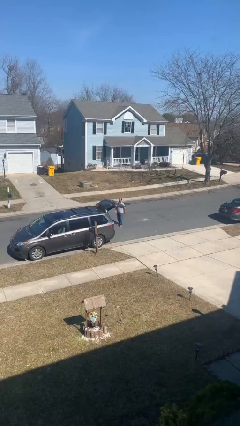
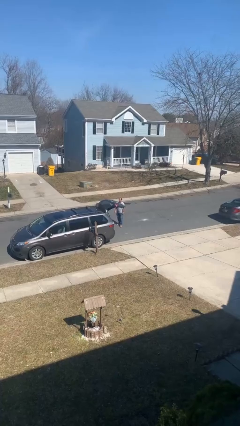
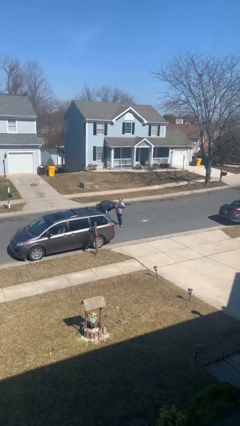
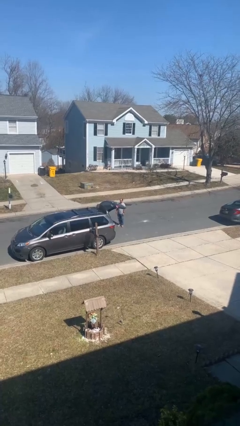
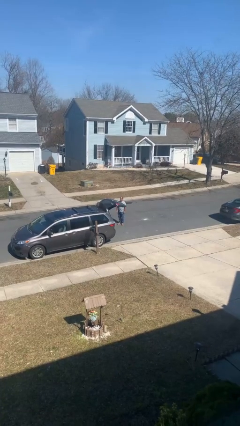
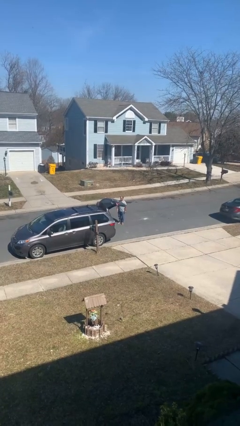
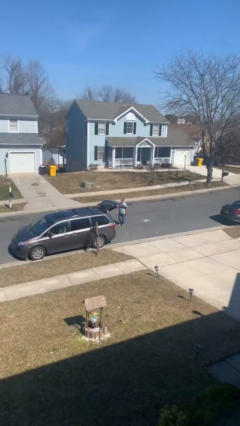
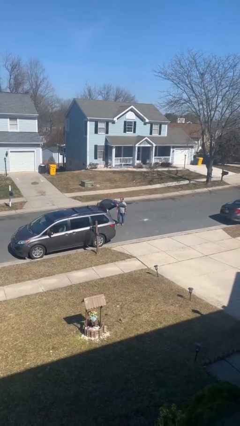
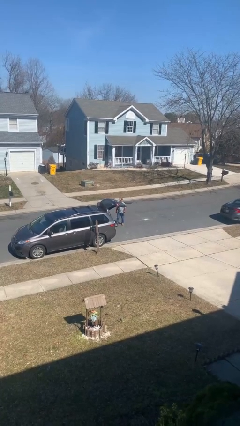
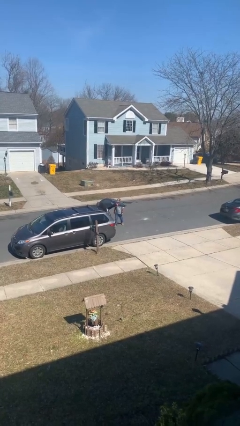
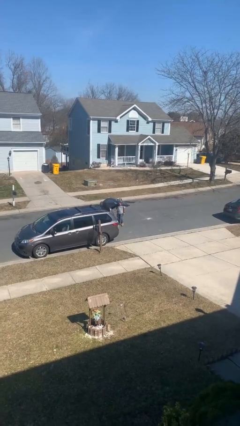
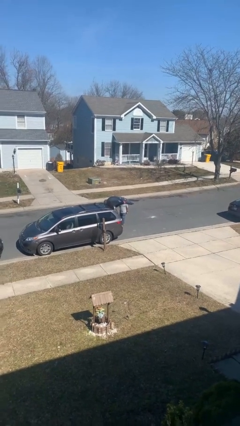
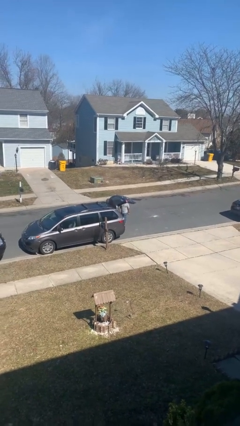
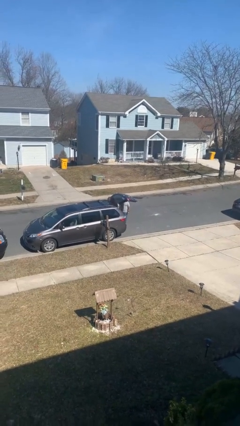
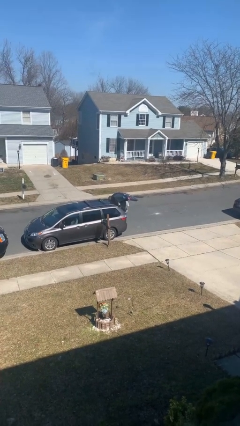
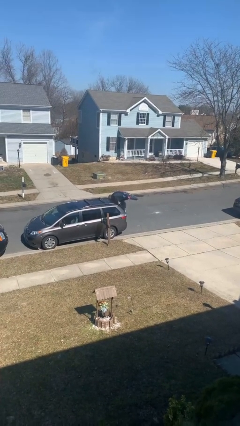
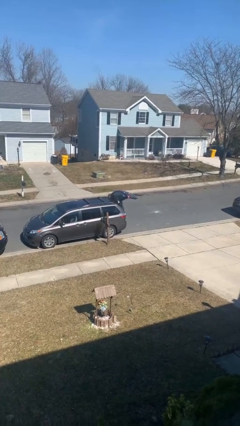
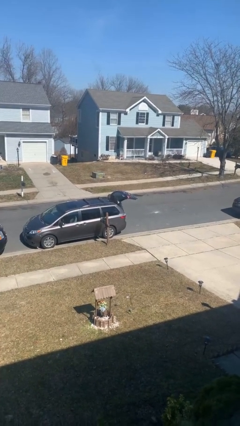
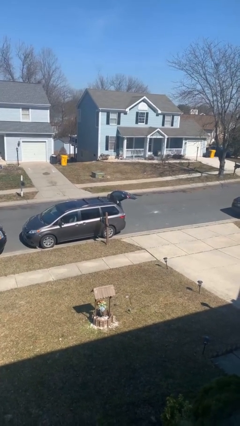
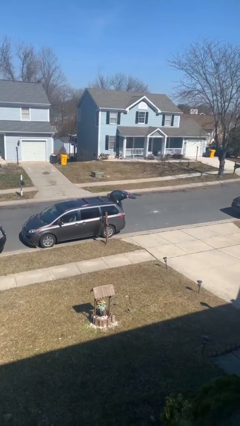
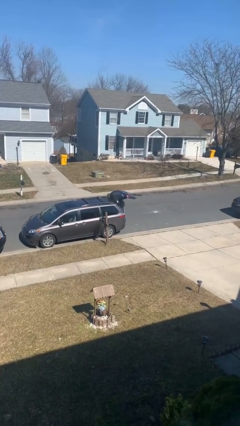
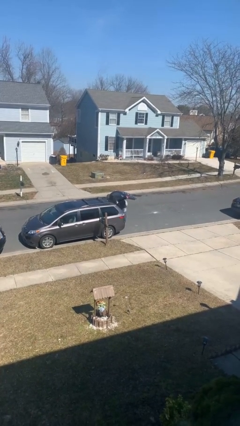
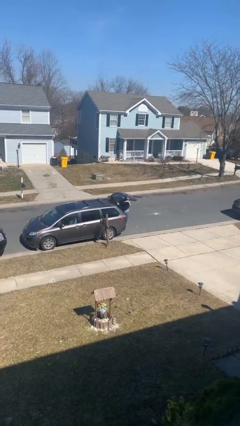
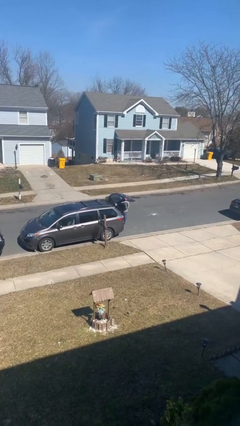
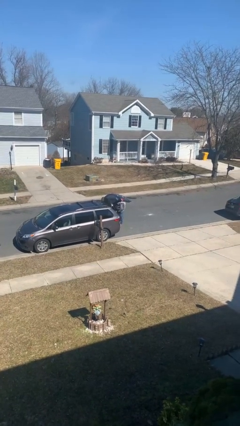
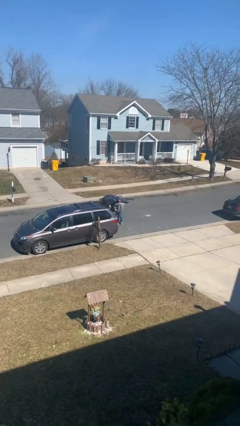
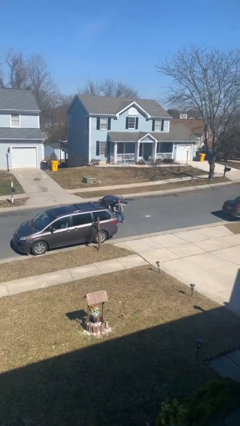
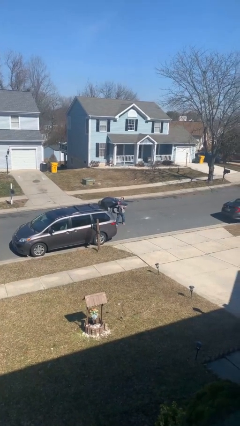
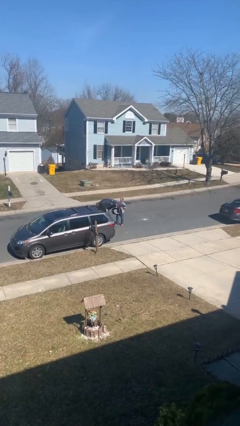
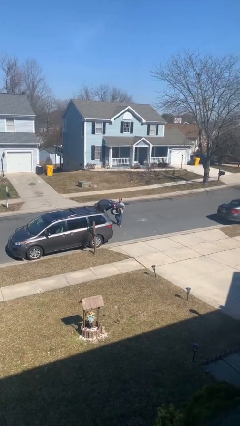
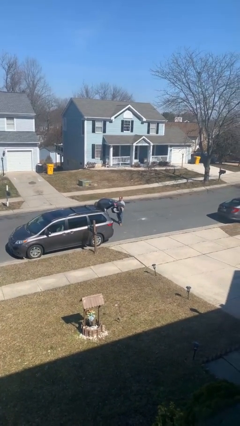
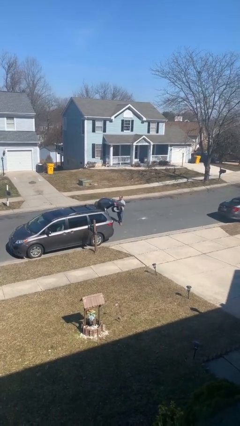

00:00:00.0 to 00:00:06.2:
person unloads car

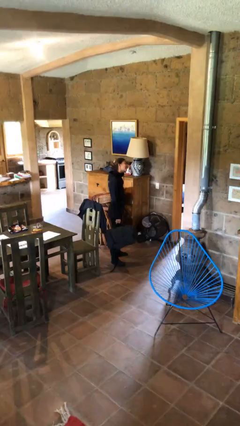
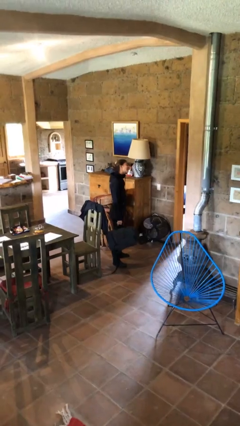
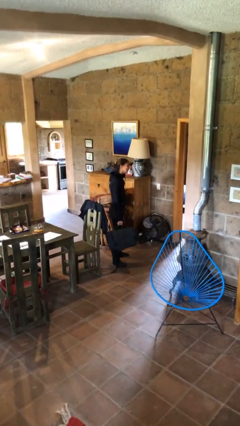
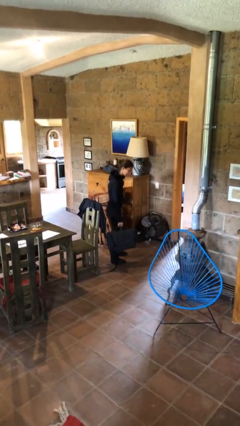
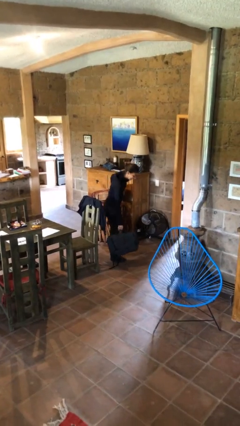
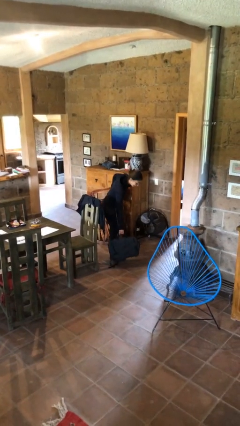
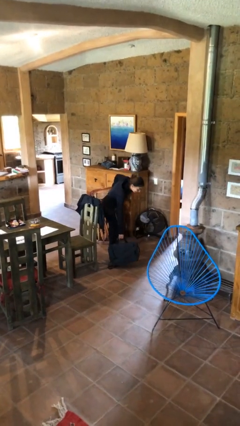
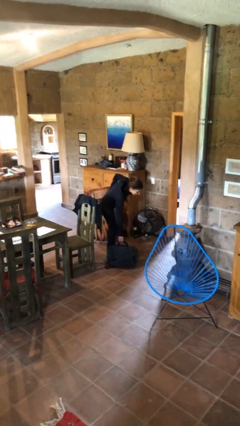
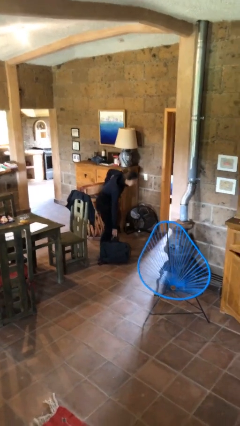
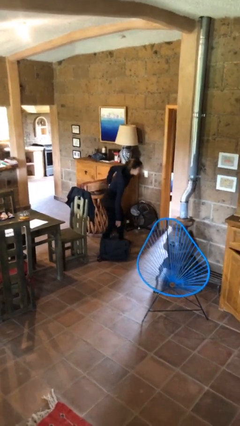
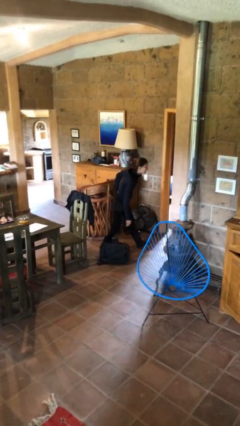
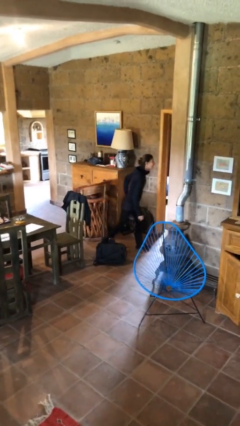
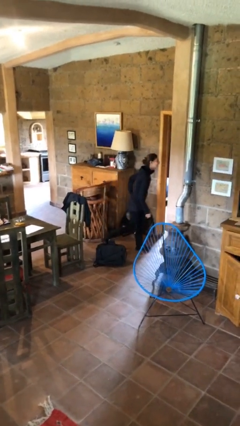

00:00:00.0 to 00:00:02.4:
person puts down object on floor

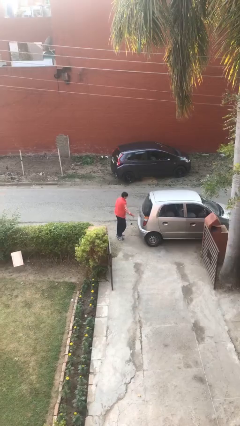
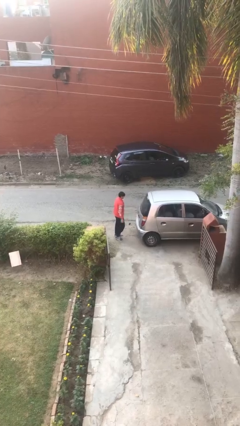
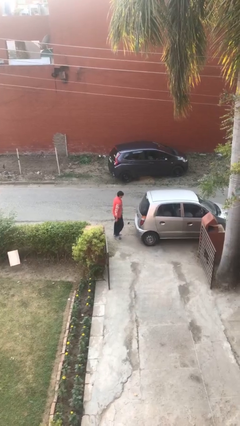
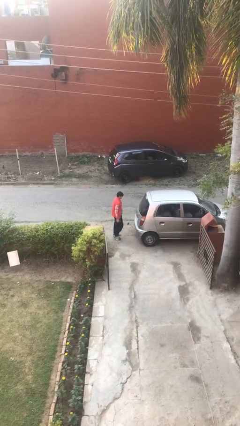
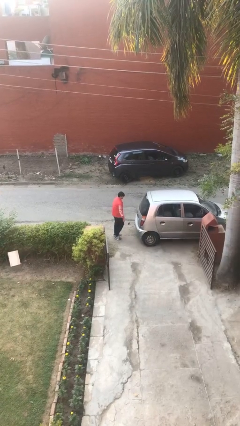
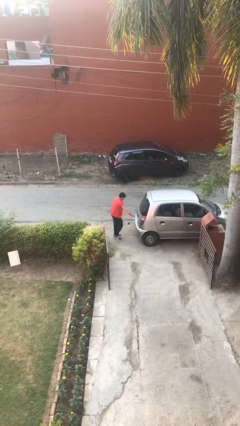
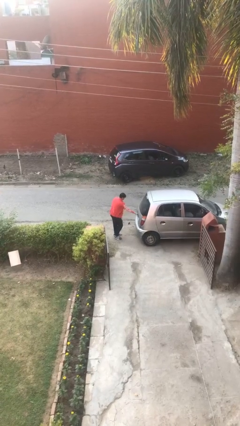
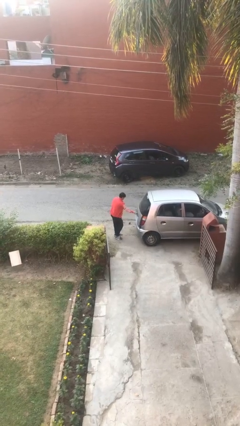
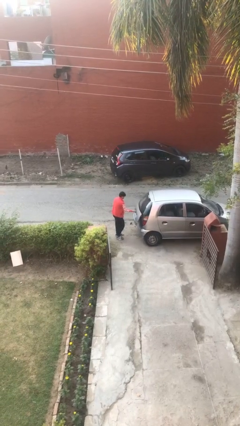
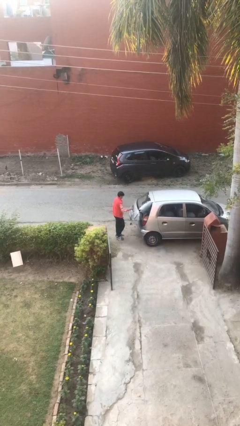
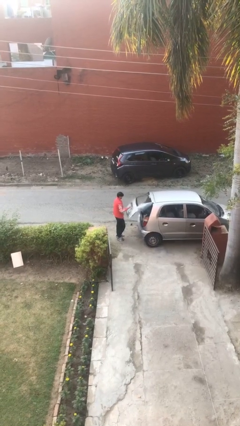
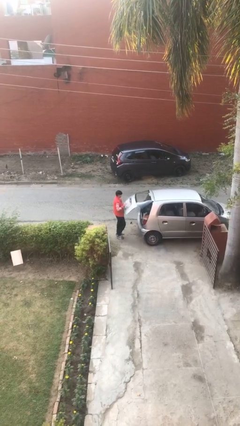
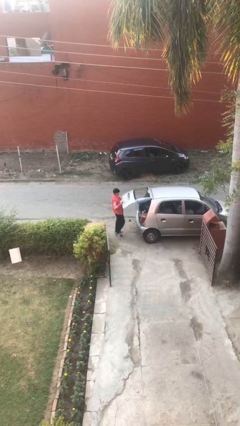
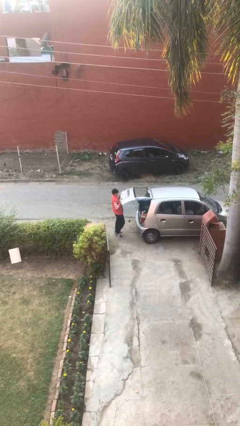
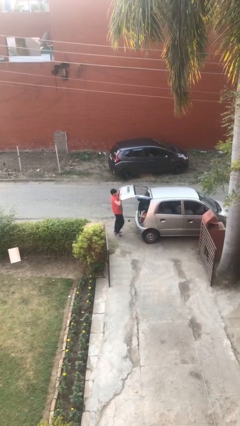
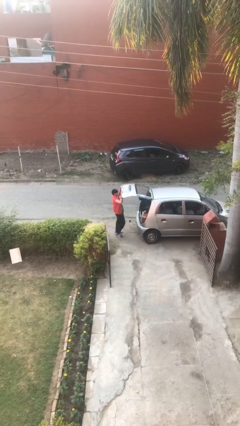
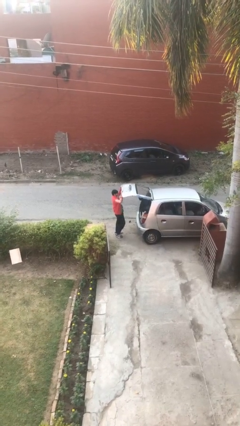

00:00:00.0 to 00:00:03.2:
person opens car trunk

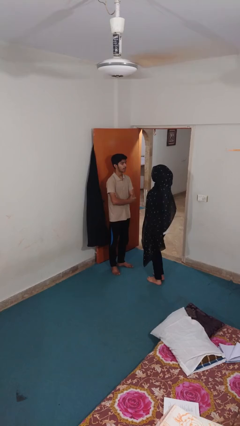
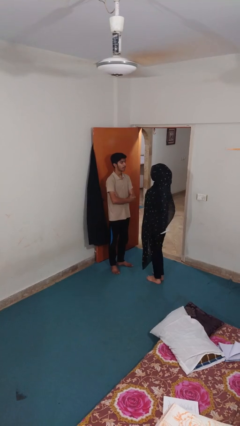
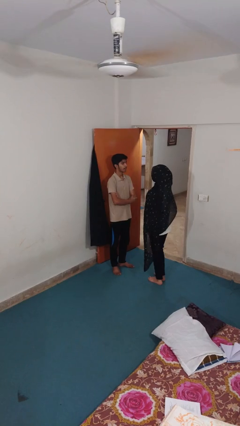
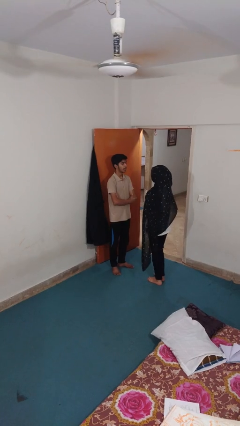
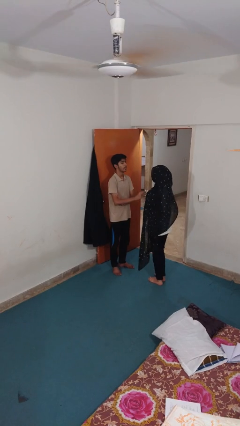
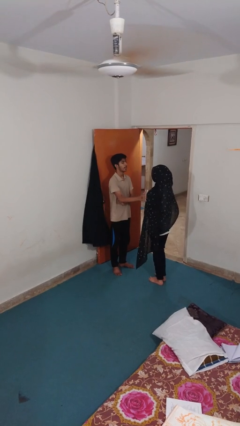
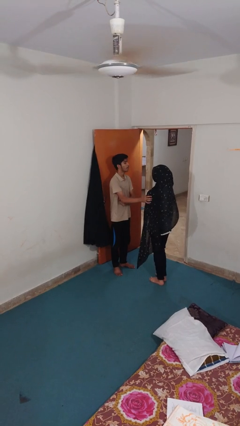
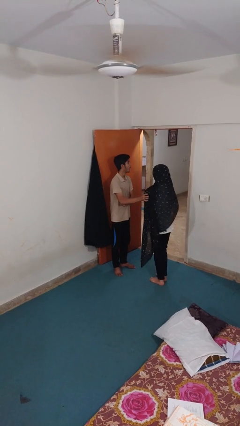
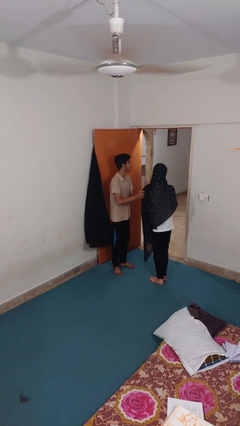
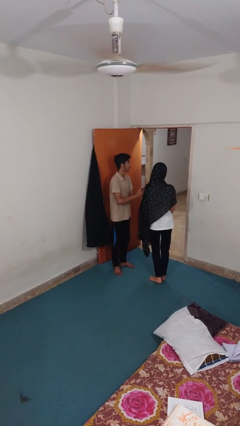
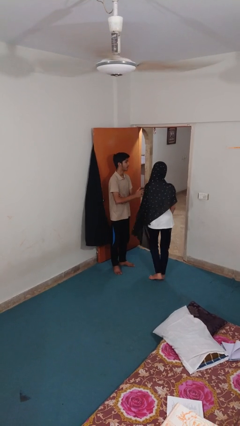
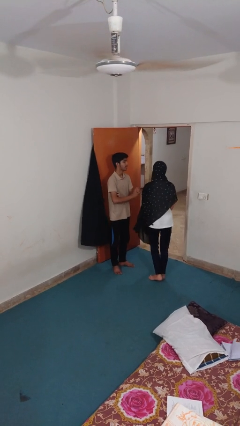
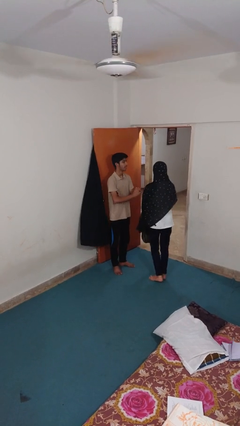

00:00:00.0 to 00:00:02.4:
person shoves person

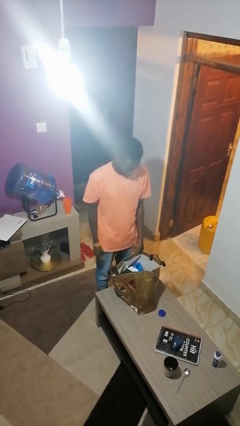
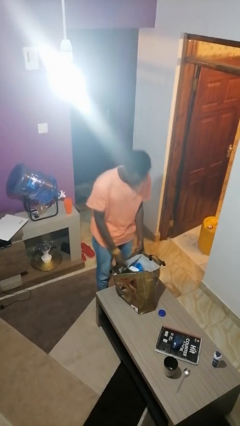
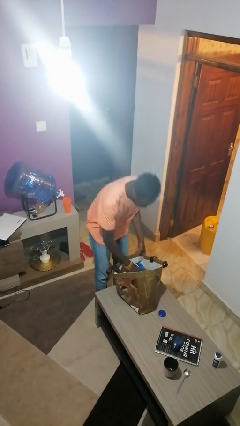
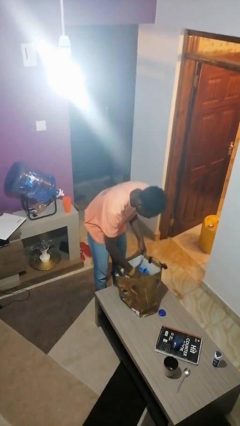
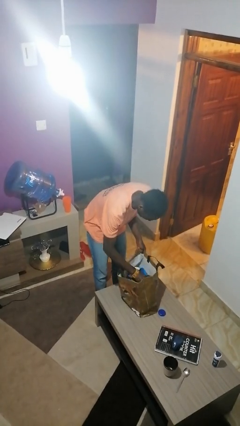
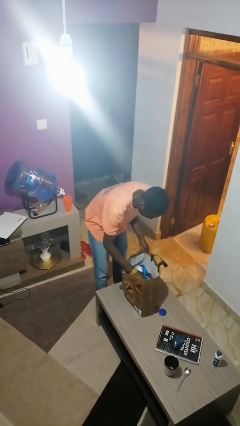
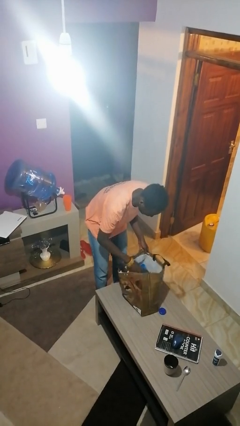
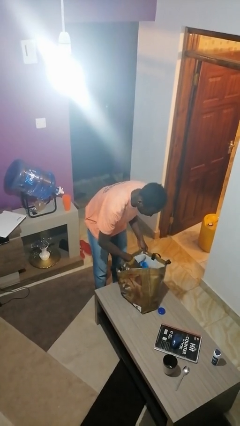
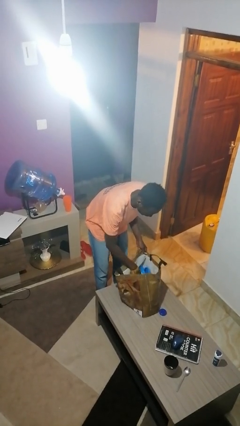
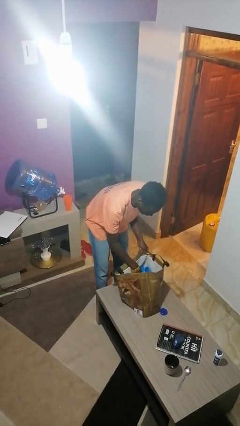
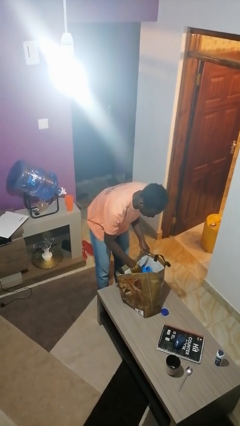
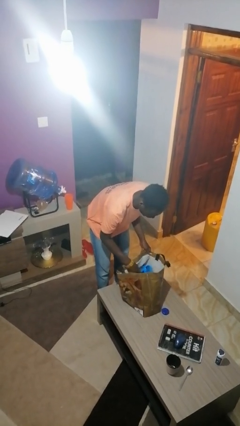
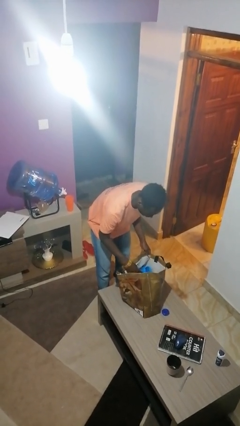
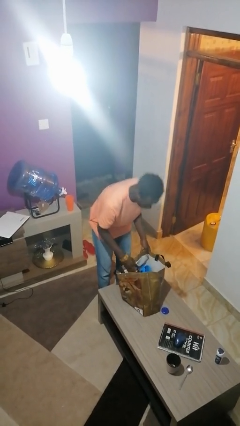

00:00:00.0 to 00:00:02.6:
person searches in bag

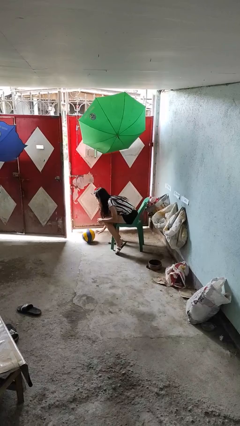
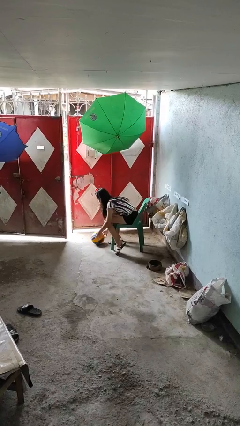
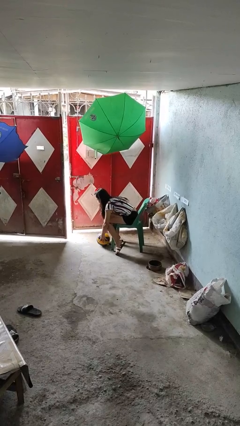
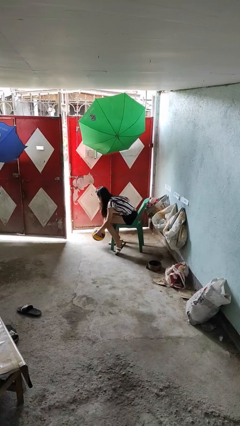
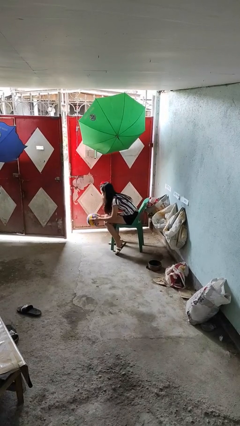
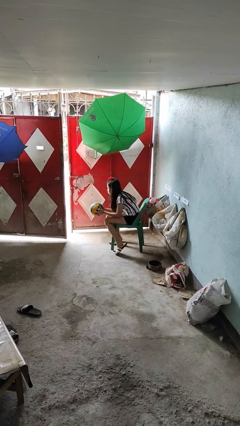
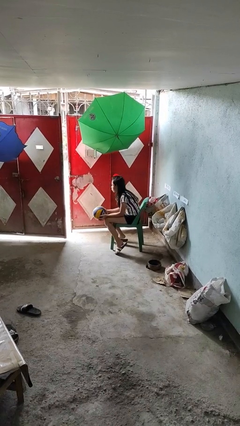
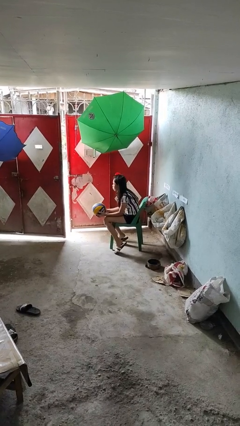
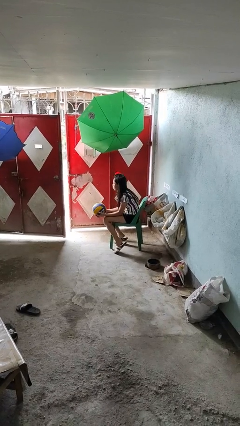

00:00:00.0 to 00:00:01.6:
person picks up object from floor
